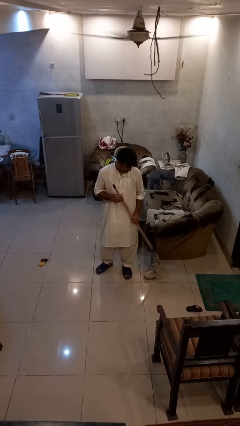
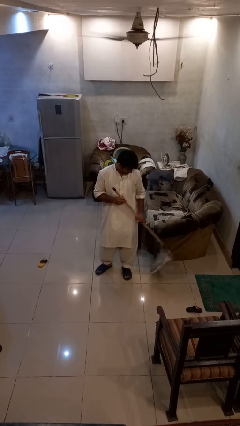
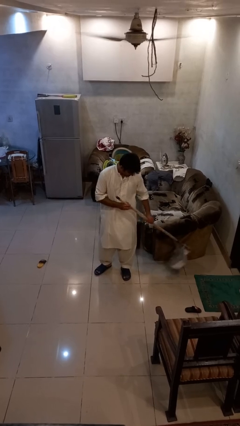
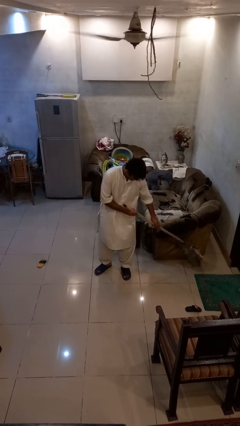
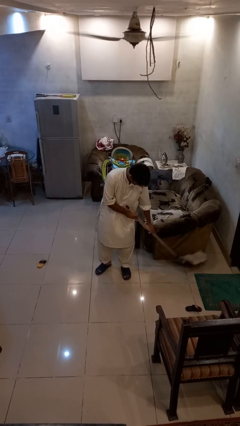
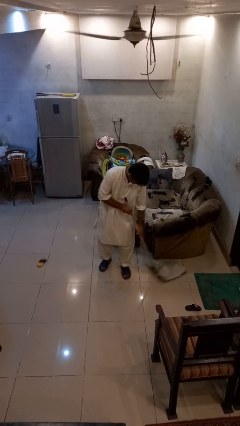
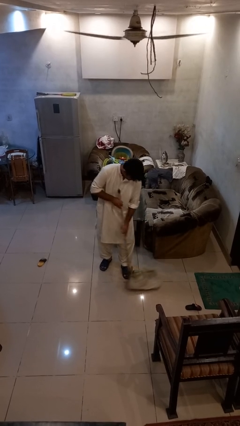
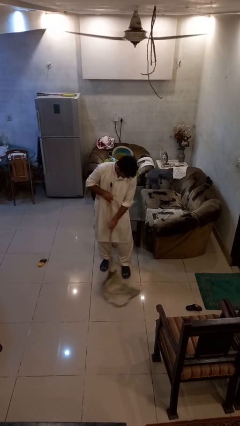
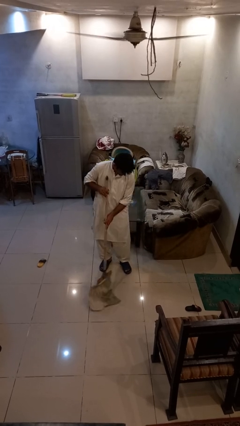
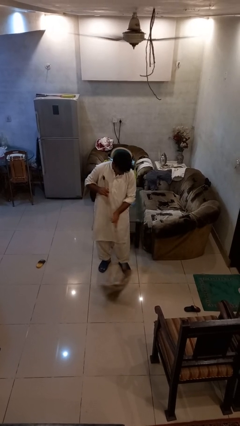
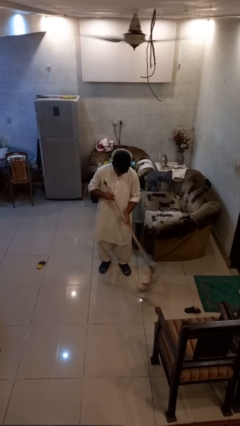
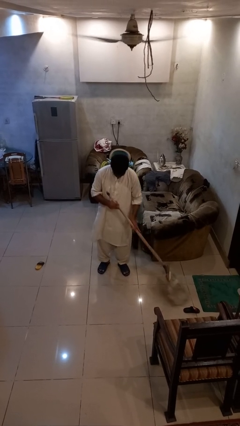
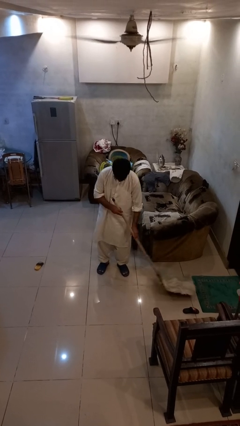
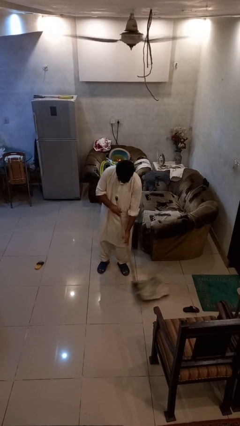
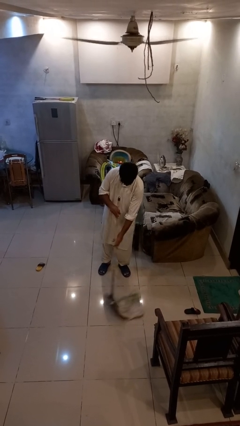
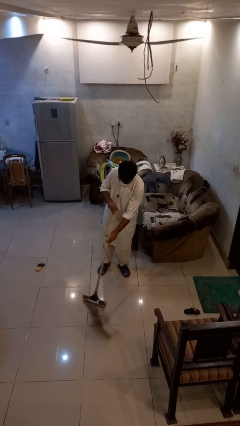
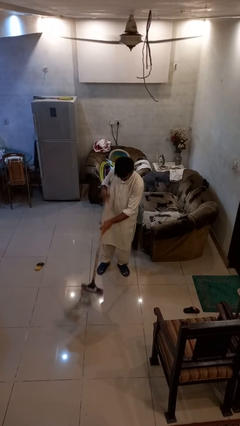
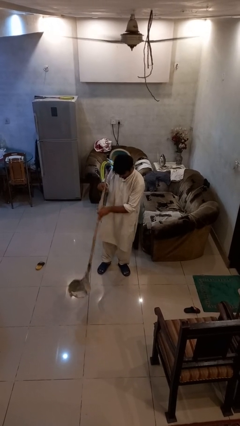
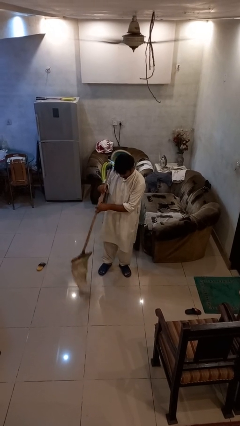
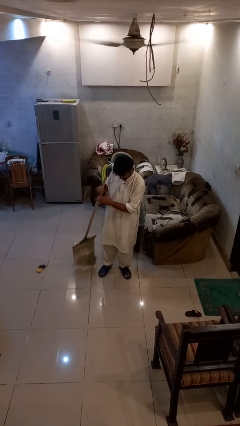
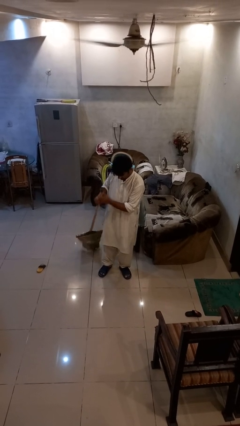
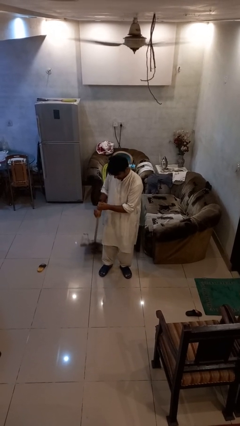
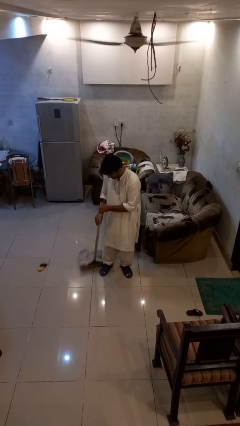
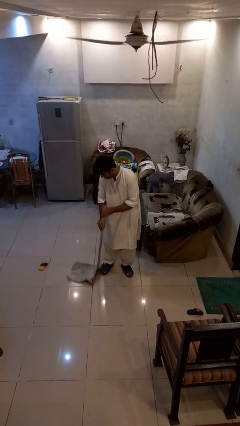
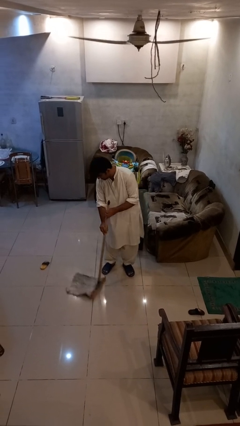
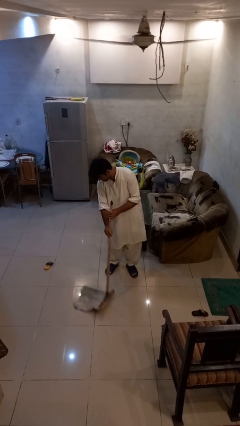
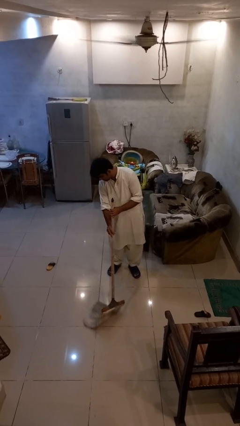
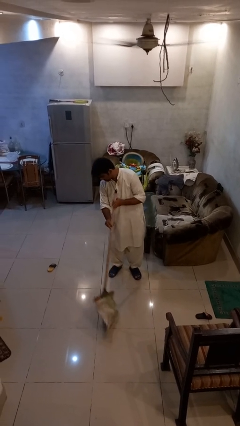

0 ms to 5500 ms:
person mops

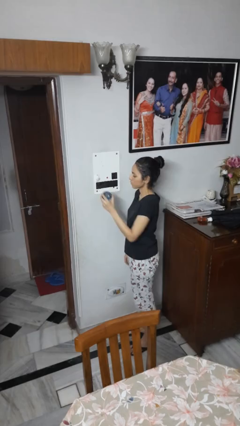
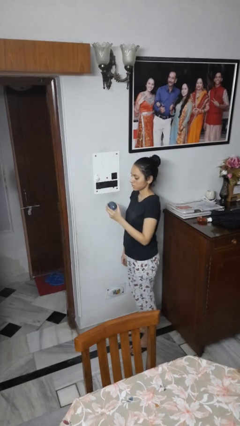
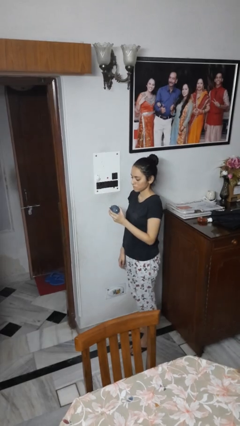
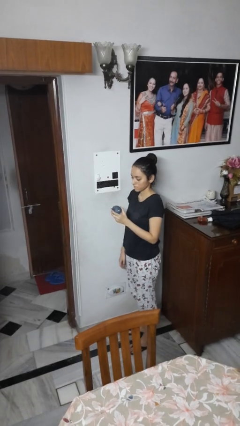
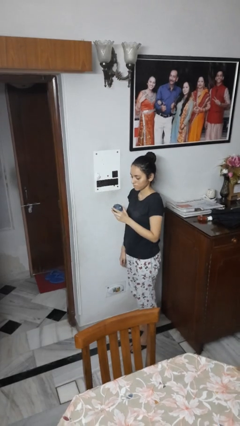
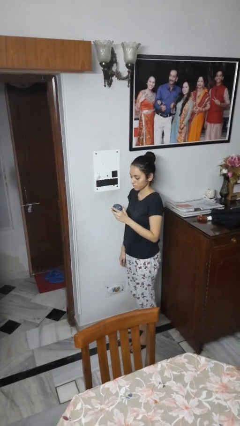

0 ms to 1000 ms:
person unplugs from electrical socket

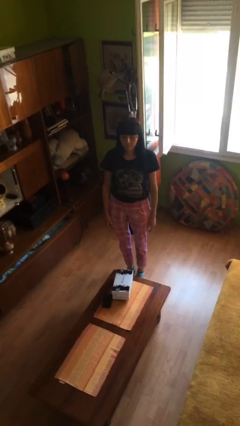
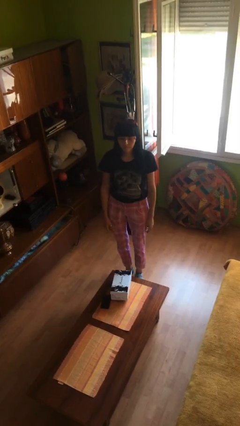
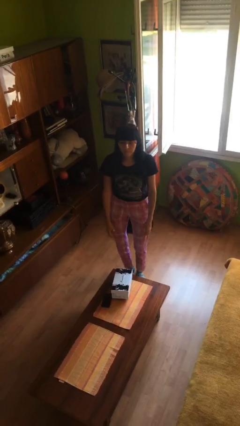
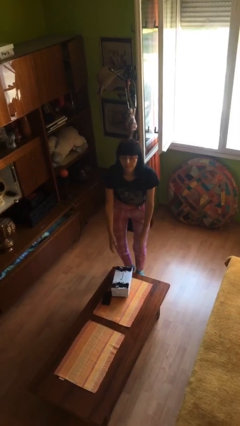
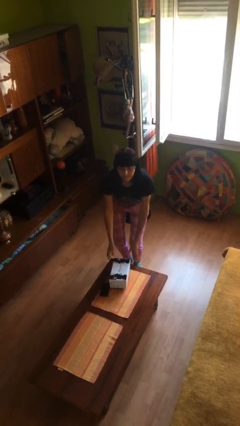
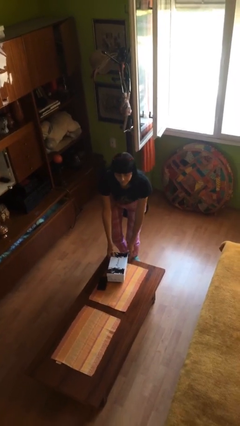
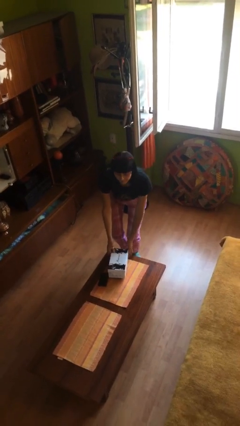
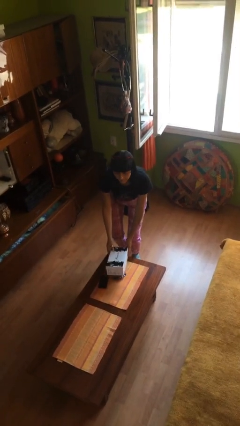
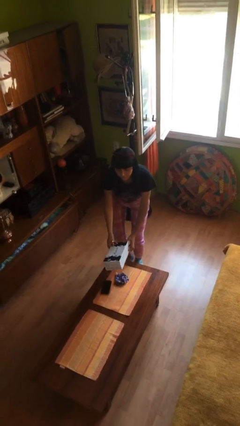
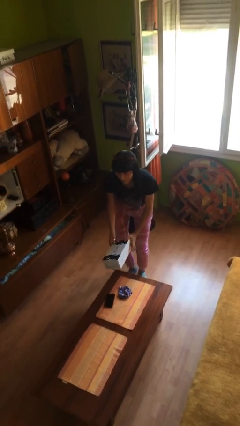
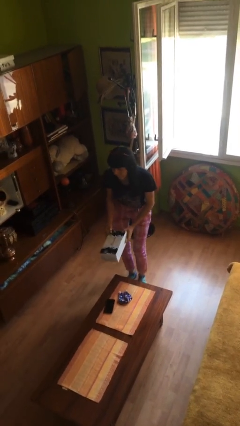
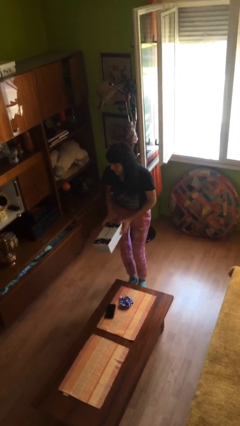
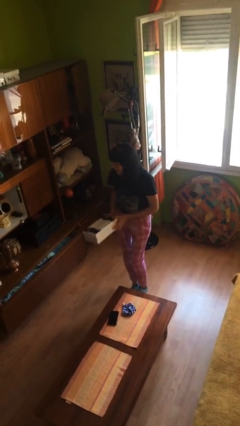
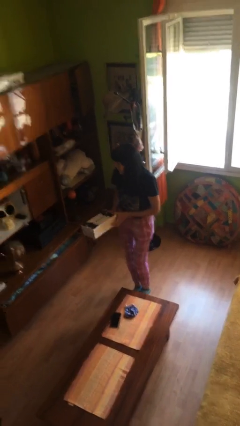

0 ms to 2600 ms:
person picks up object from table

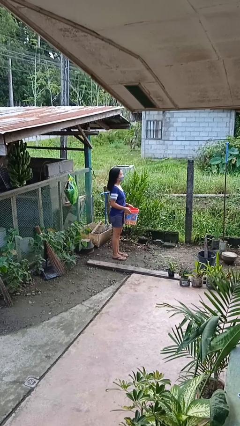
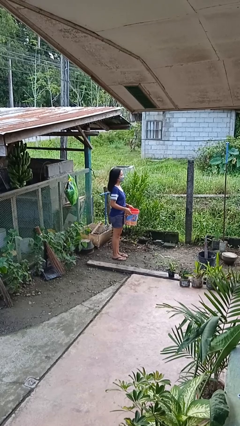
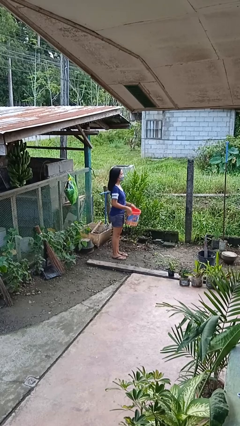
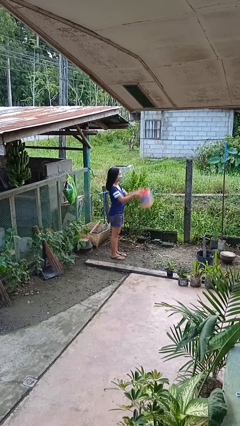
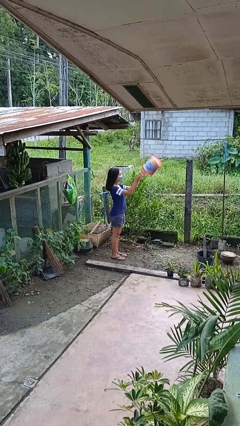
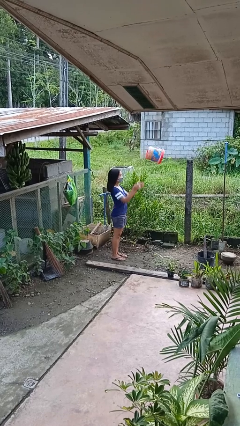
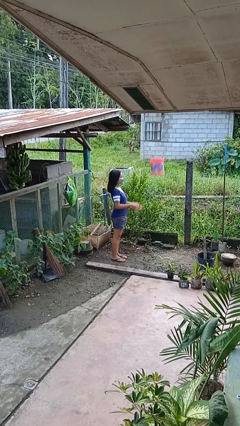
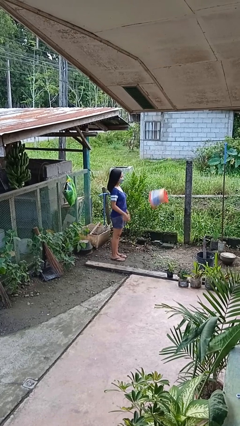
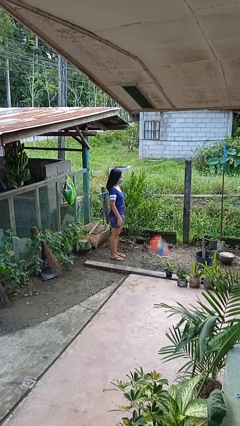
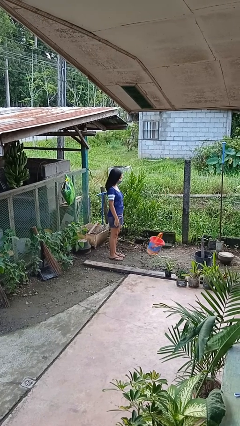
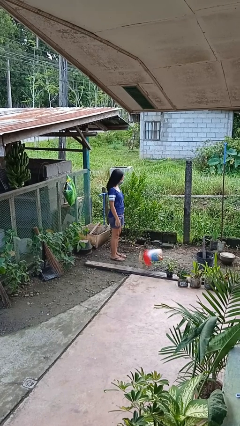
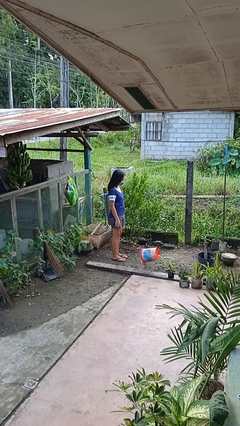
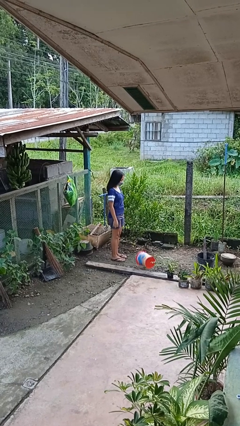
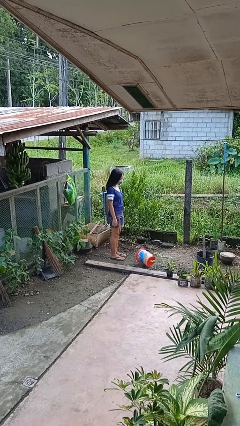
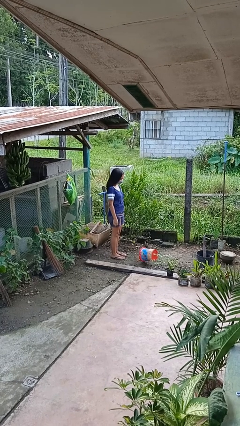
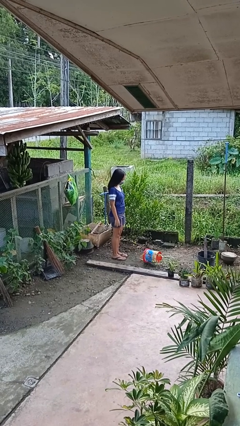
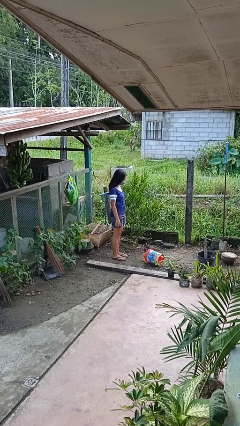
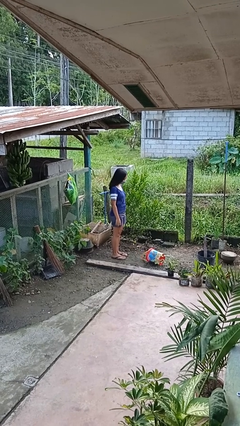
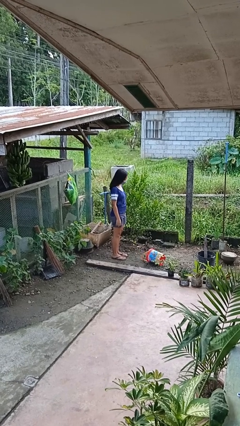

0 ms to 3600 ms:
person throws object into air

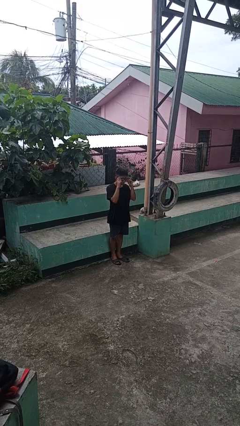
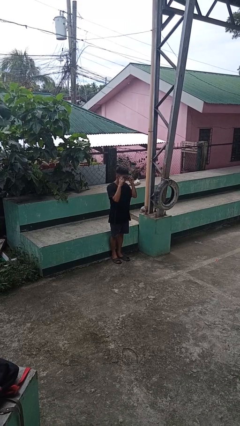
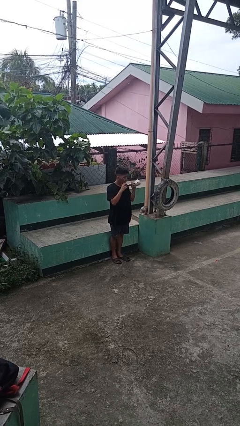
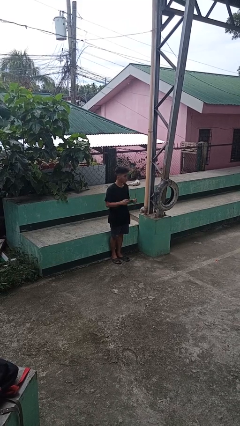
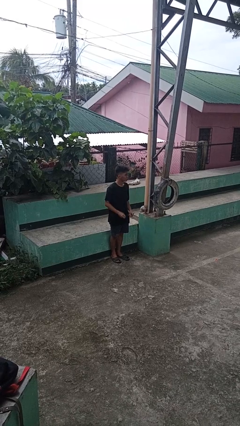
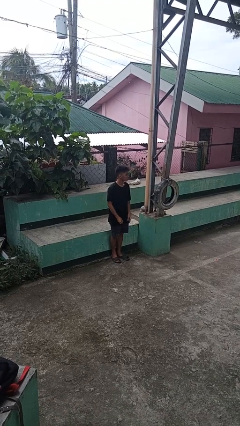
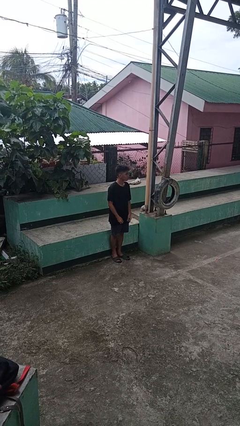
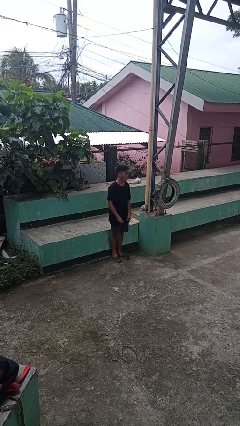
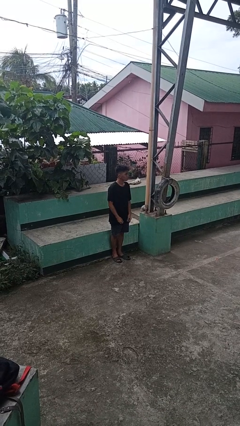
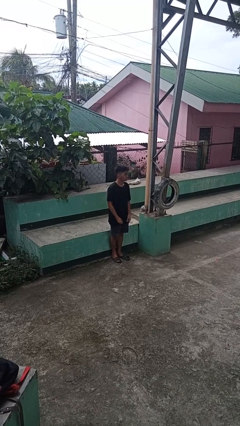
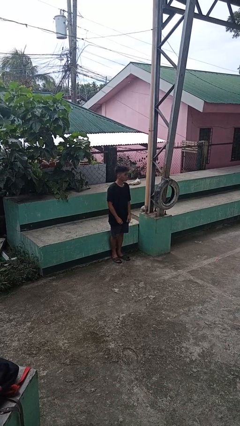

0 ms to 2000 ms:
person takes off sunglasses

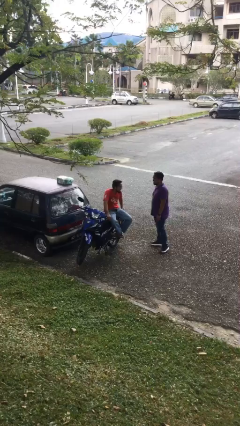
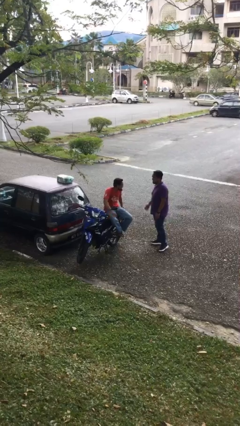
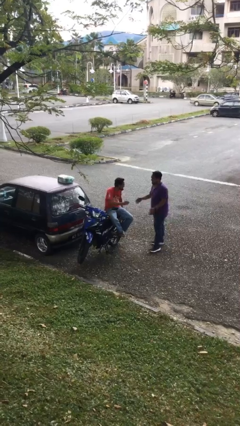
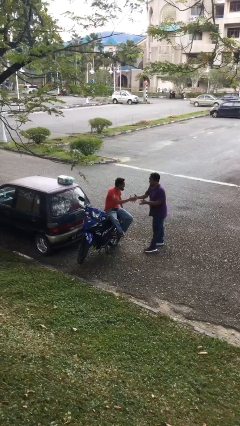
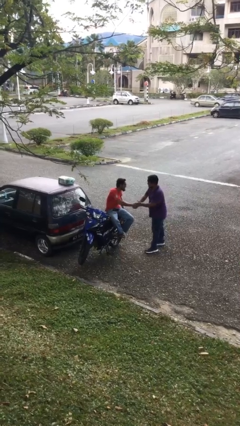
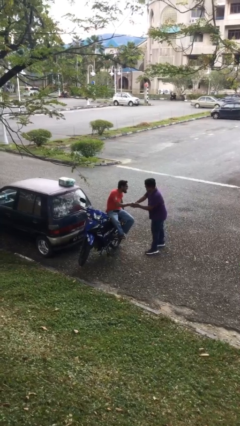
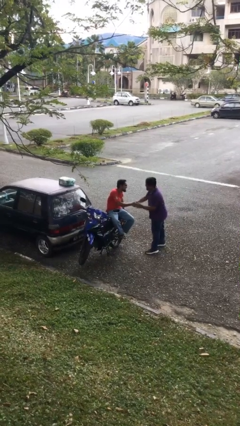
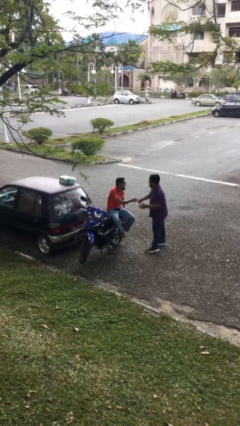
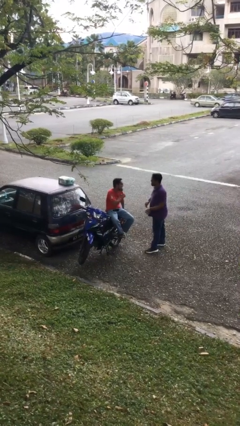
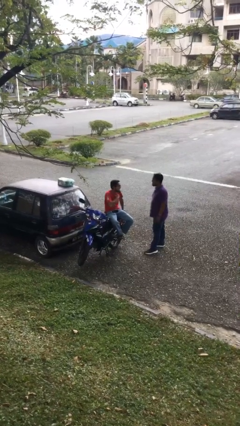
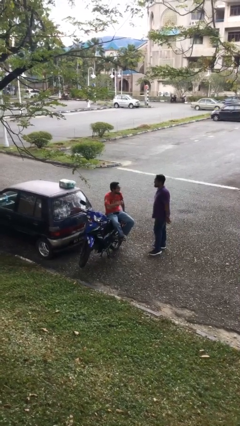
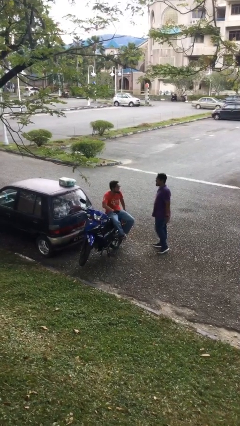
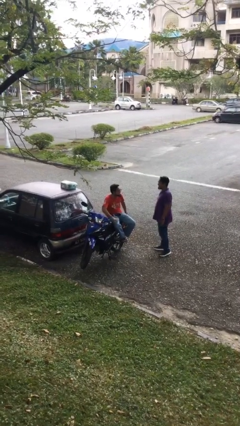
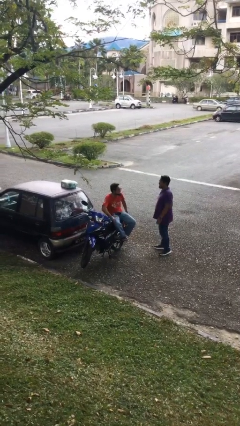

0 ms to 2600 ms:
person shakes hand
